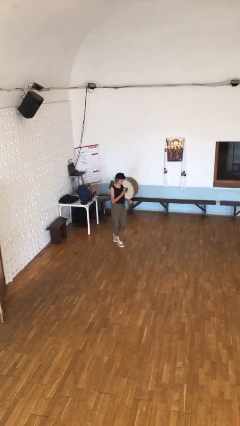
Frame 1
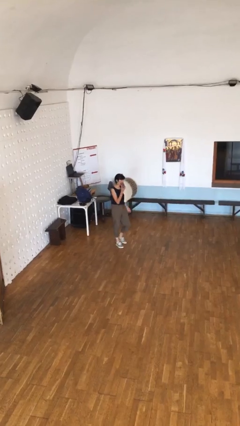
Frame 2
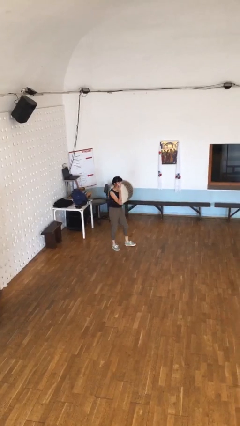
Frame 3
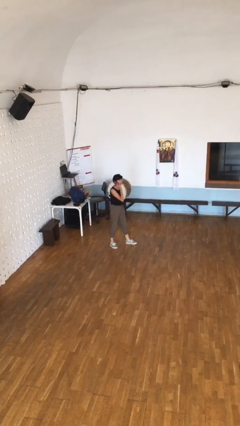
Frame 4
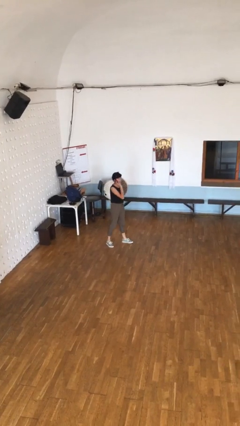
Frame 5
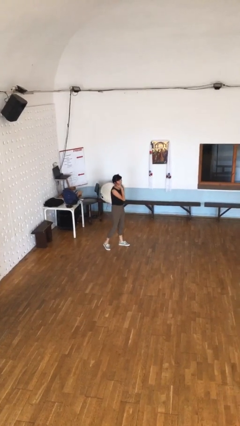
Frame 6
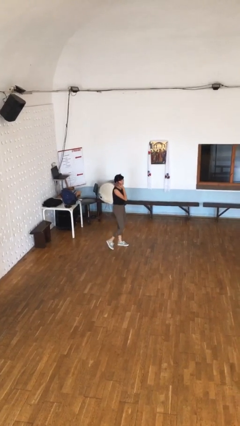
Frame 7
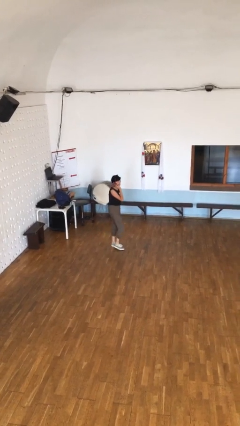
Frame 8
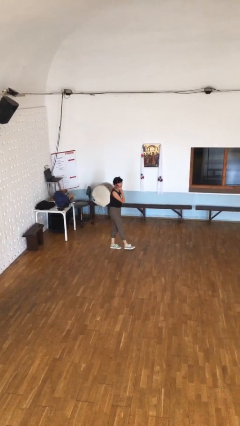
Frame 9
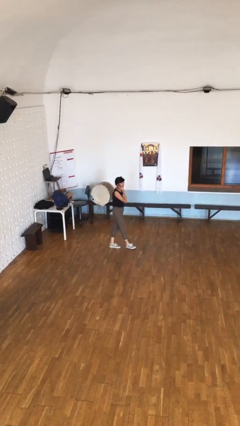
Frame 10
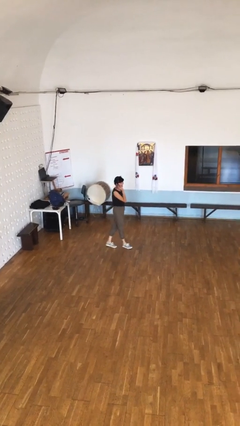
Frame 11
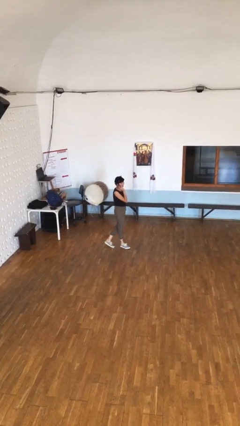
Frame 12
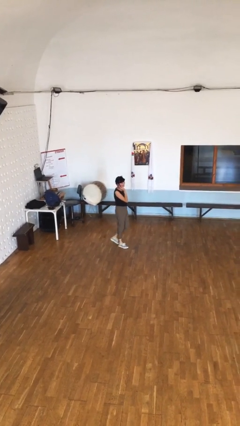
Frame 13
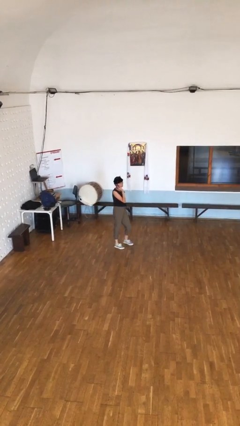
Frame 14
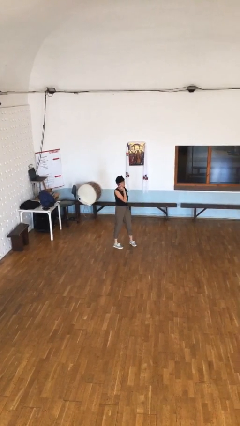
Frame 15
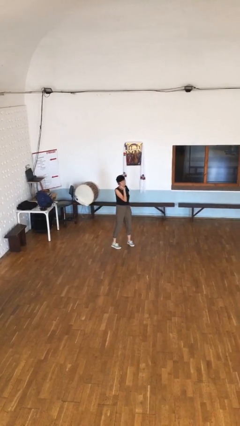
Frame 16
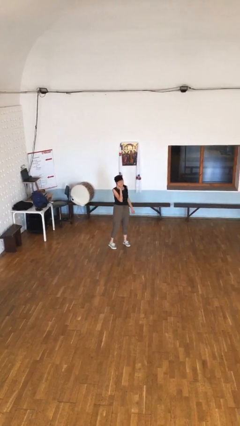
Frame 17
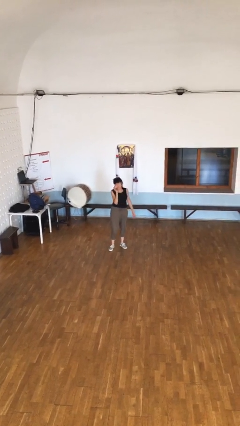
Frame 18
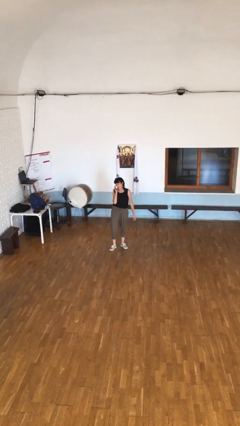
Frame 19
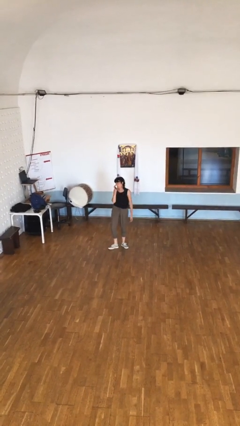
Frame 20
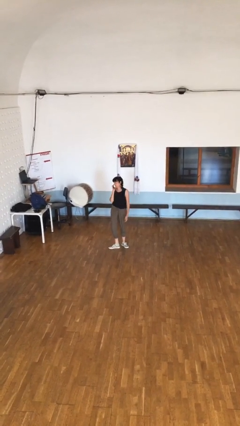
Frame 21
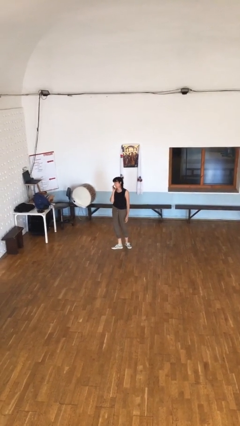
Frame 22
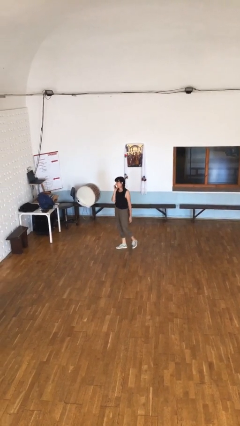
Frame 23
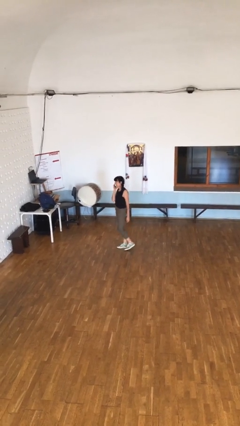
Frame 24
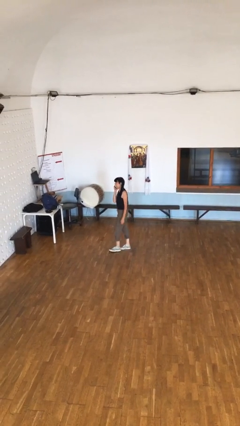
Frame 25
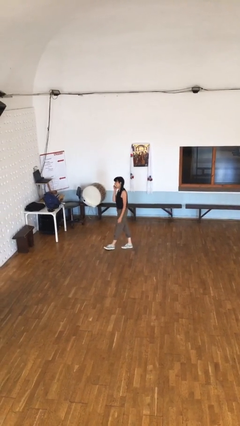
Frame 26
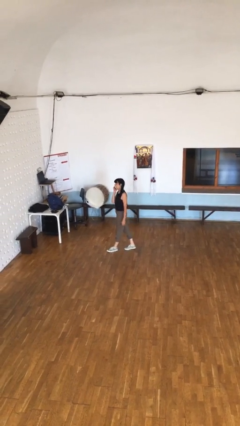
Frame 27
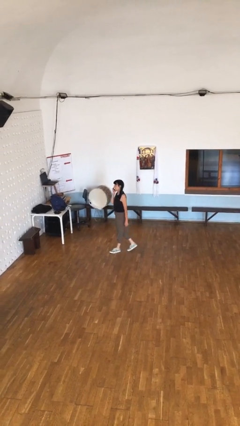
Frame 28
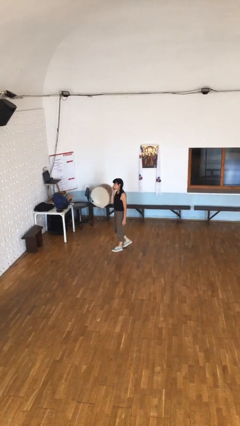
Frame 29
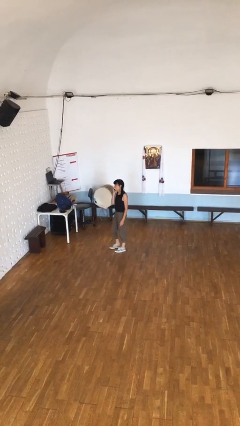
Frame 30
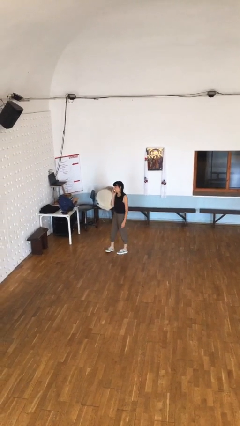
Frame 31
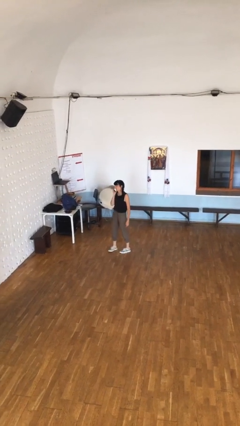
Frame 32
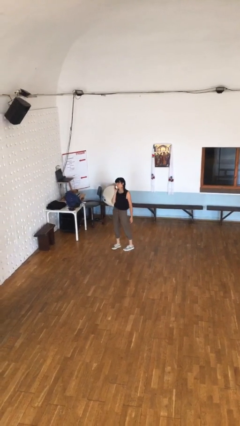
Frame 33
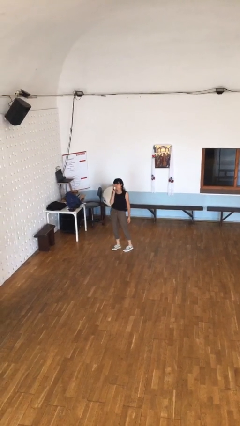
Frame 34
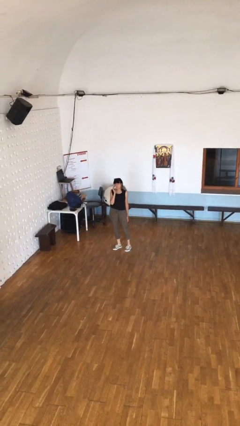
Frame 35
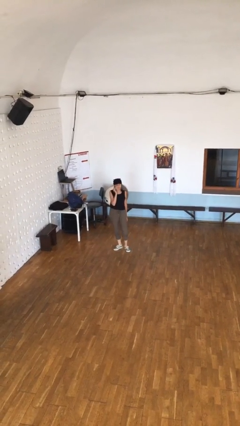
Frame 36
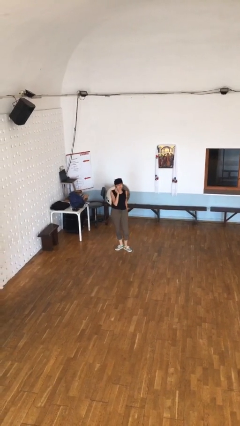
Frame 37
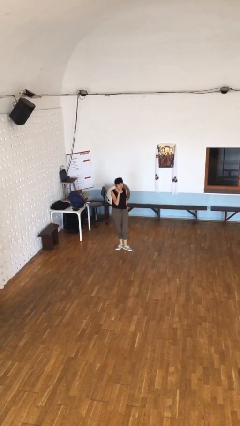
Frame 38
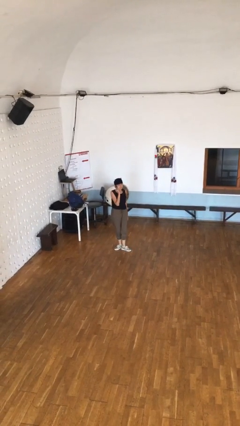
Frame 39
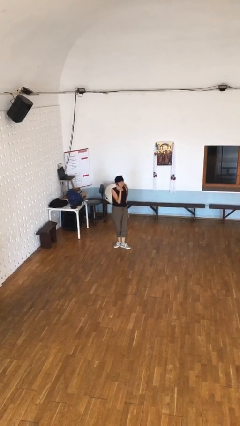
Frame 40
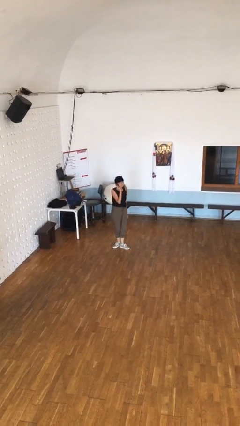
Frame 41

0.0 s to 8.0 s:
person talks on phone

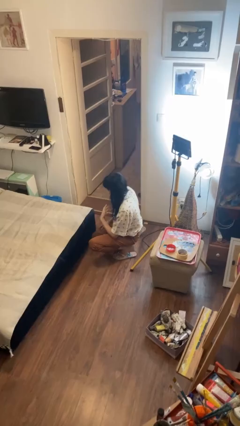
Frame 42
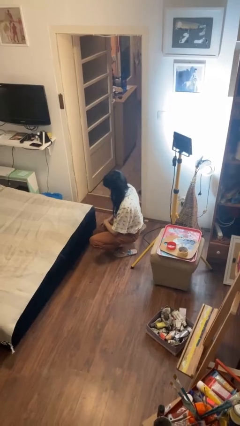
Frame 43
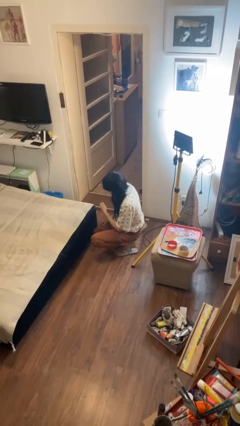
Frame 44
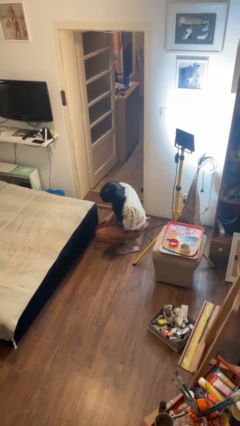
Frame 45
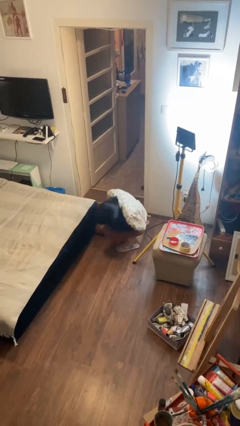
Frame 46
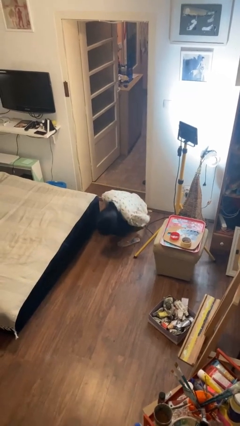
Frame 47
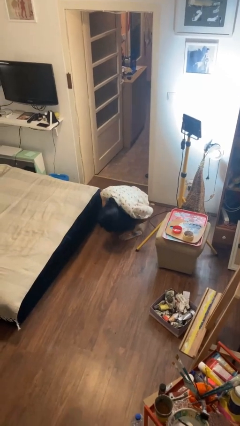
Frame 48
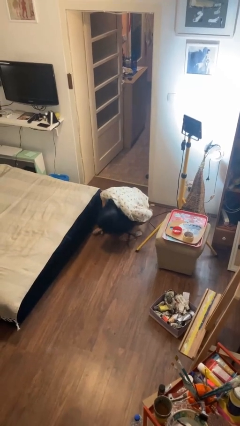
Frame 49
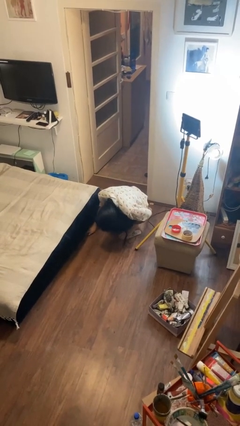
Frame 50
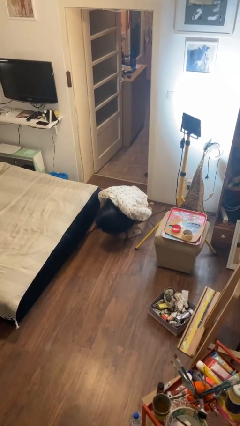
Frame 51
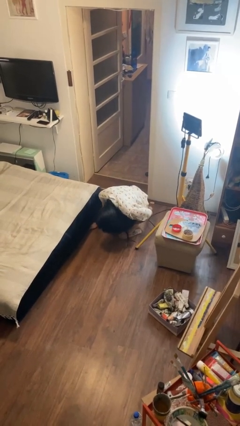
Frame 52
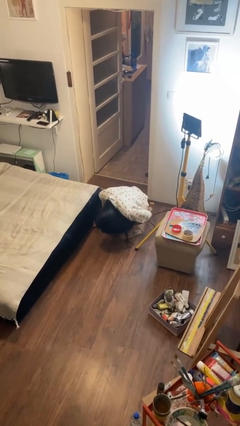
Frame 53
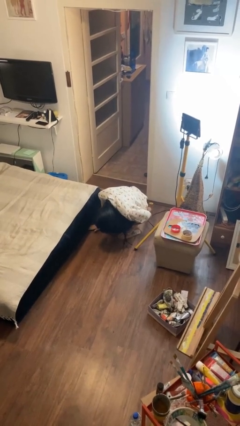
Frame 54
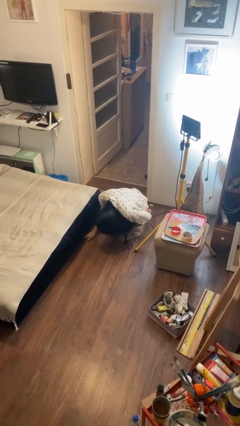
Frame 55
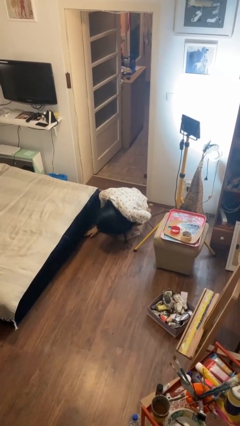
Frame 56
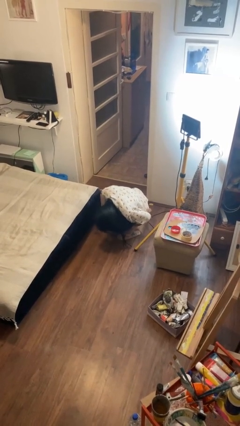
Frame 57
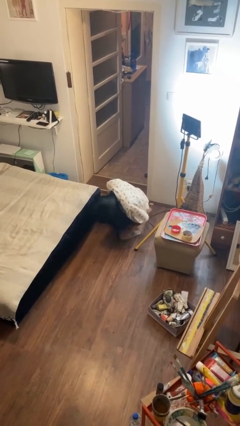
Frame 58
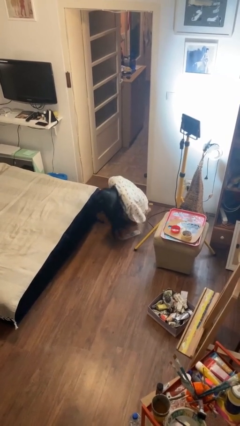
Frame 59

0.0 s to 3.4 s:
person searches under bed

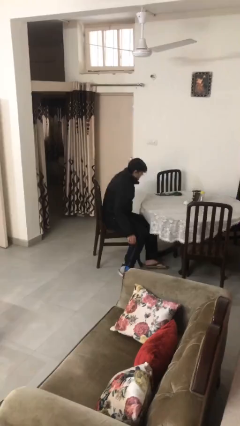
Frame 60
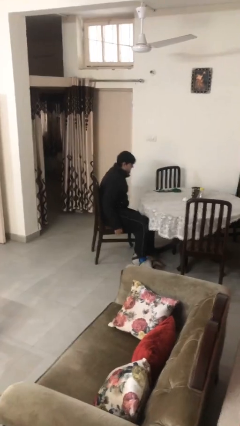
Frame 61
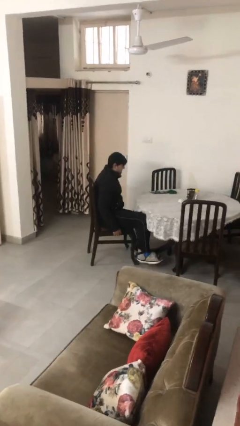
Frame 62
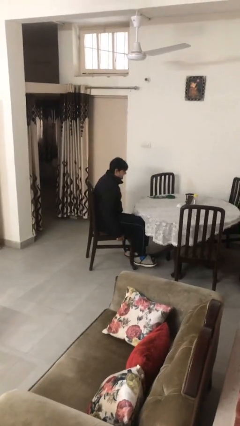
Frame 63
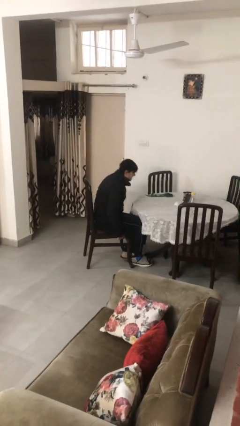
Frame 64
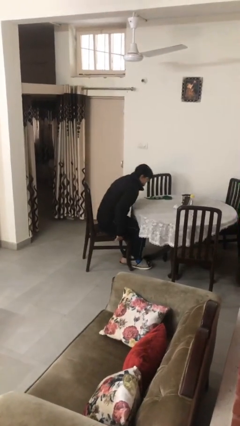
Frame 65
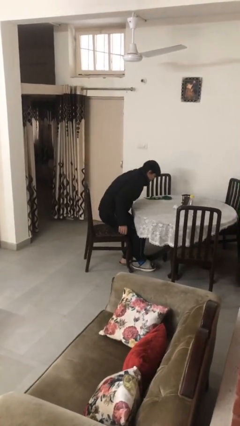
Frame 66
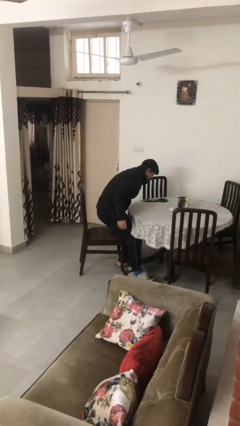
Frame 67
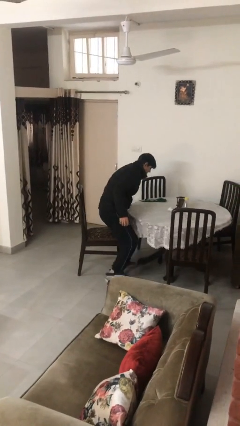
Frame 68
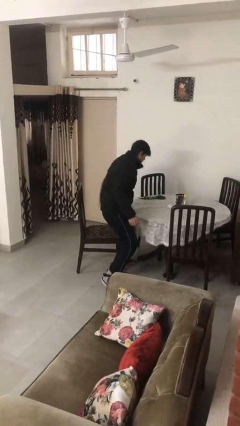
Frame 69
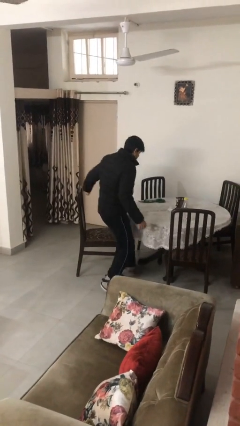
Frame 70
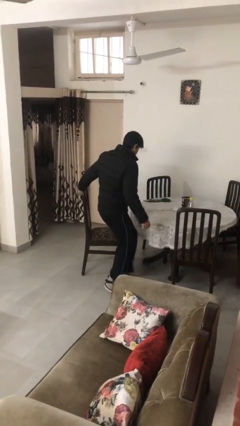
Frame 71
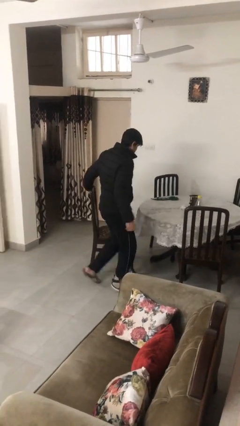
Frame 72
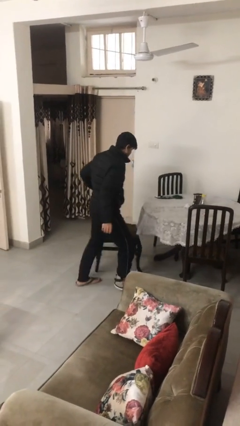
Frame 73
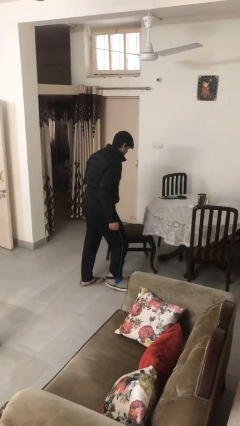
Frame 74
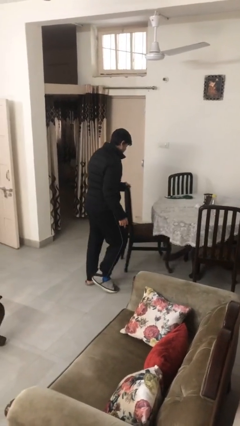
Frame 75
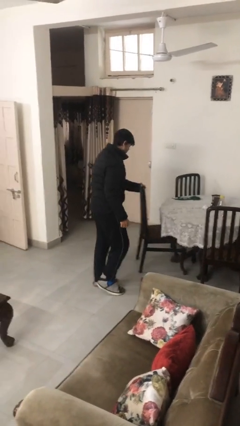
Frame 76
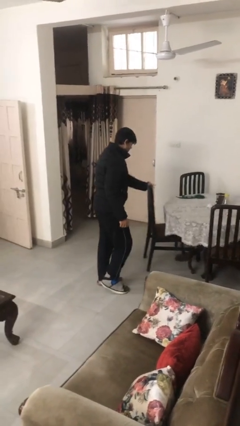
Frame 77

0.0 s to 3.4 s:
person stands up

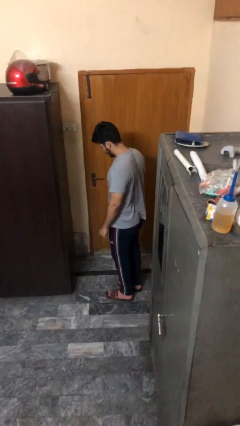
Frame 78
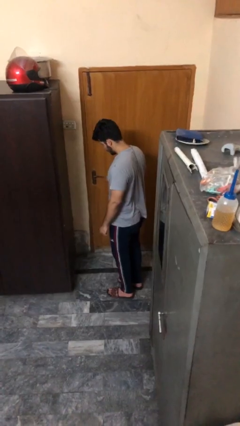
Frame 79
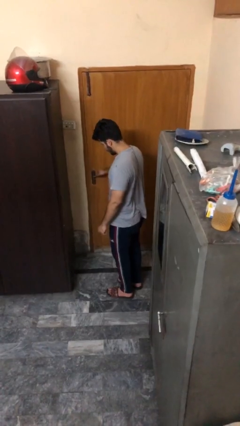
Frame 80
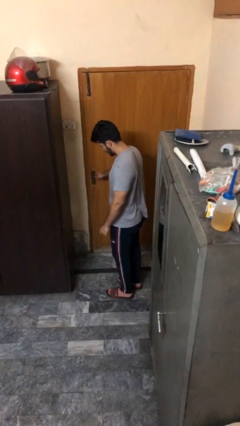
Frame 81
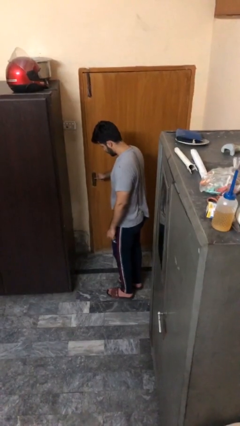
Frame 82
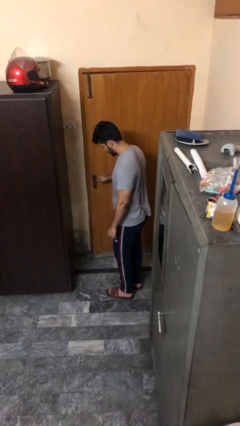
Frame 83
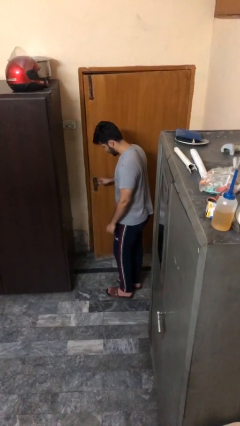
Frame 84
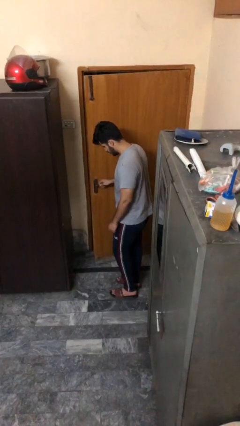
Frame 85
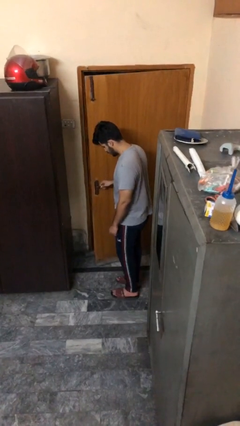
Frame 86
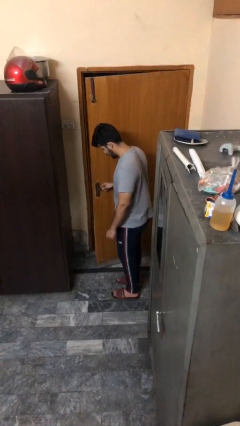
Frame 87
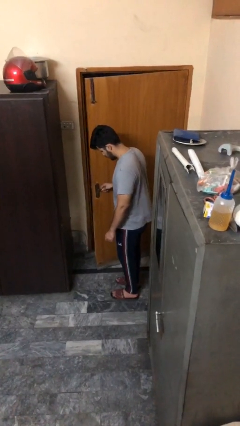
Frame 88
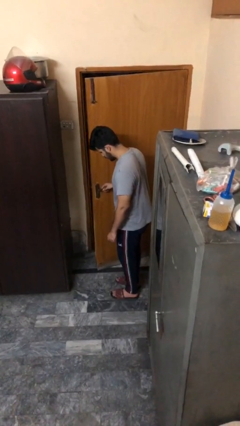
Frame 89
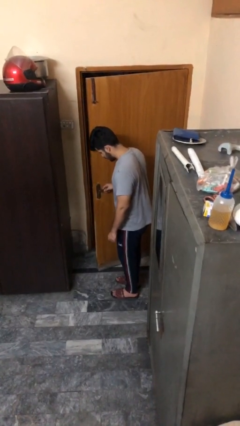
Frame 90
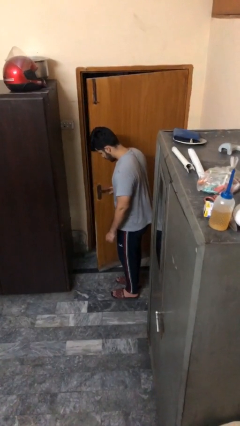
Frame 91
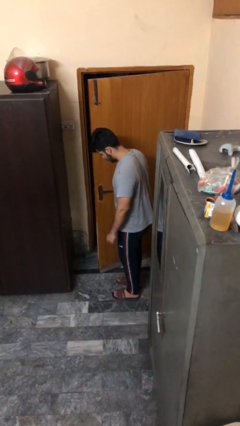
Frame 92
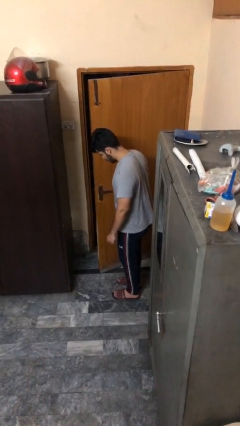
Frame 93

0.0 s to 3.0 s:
person opens facility door
